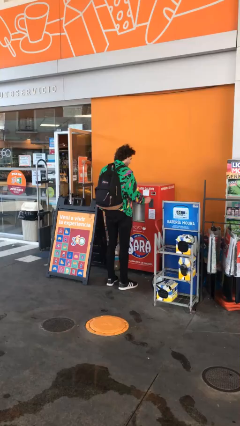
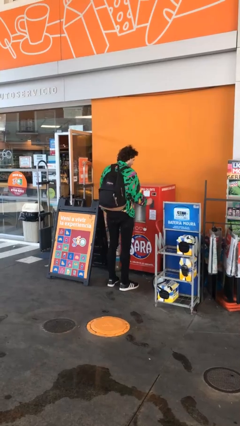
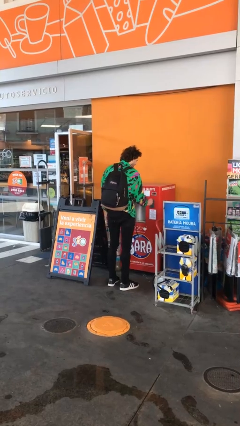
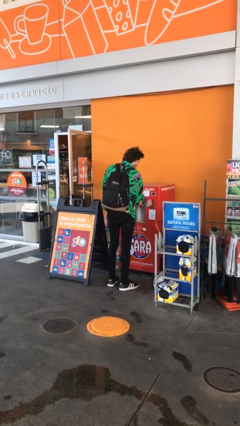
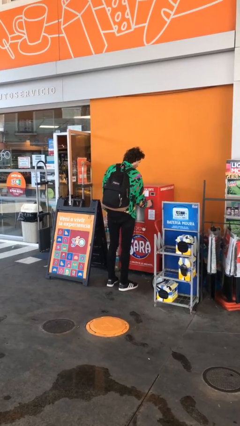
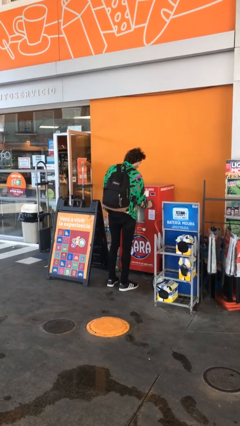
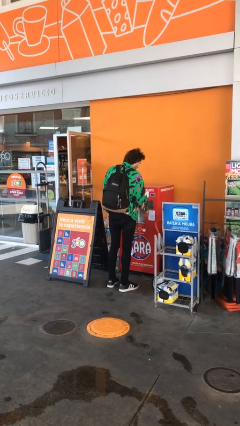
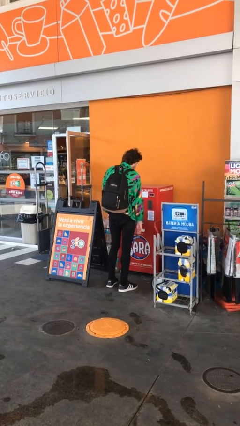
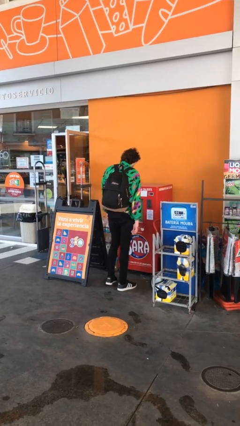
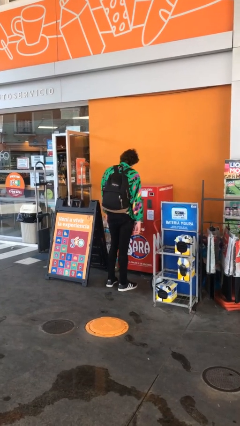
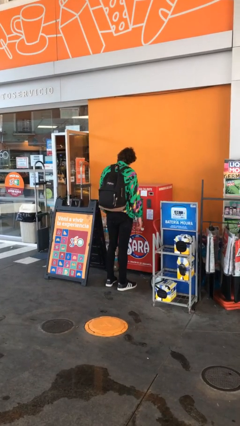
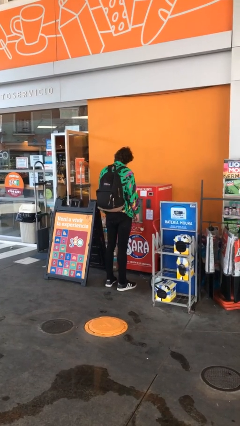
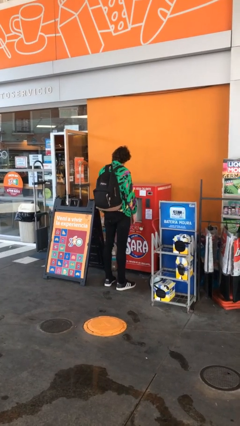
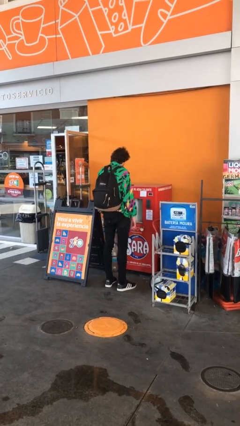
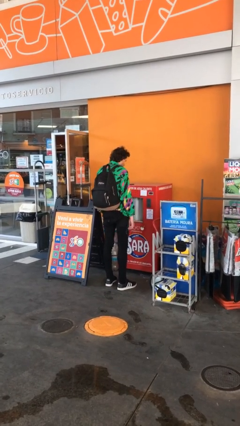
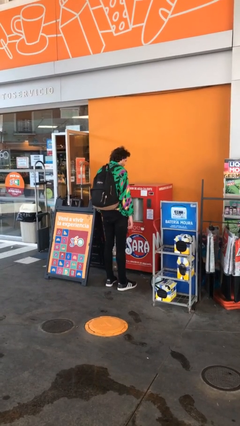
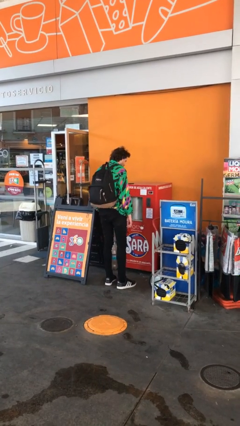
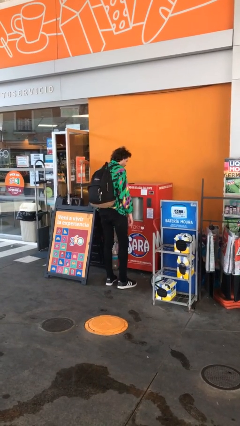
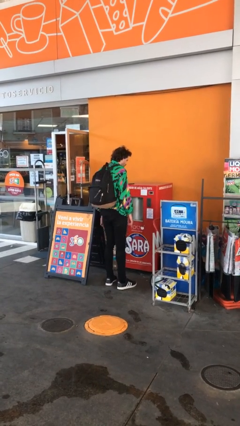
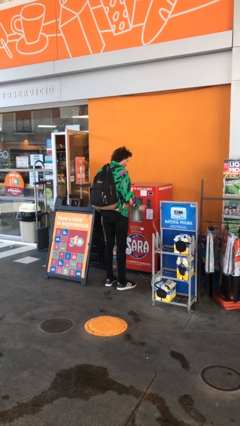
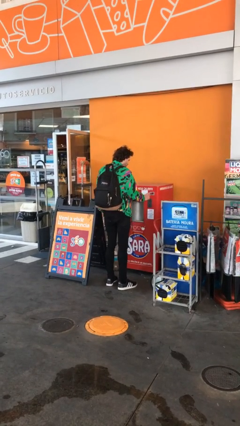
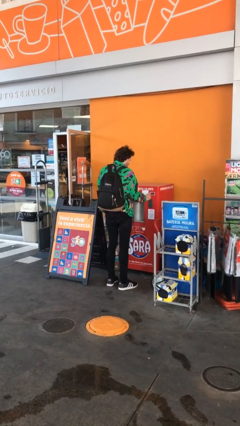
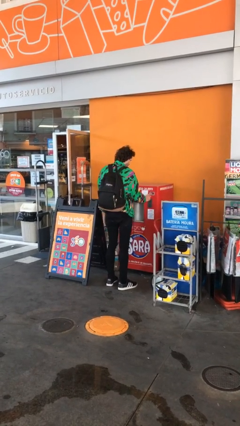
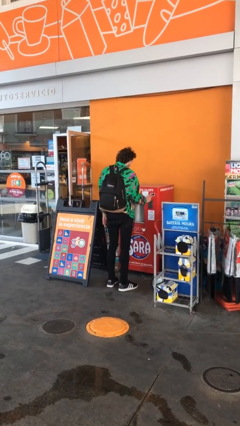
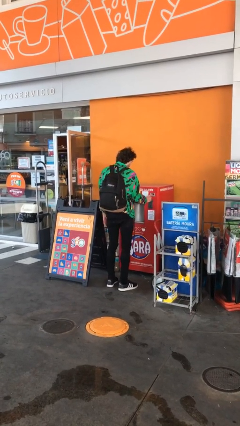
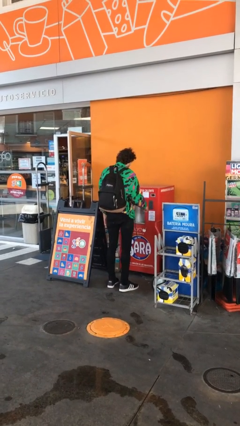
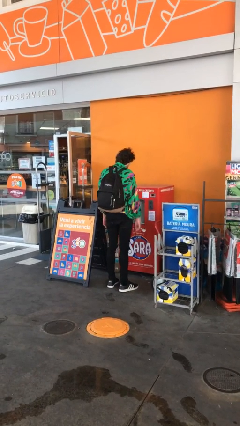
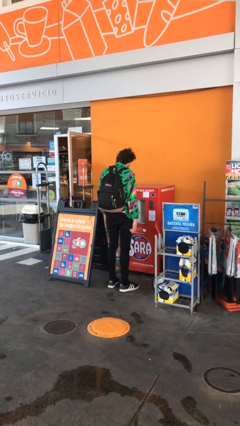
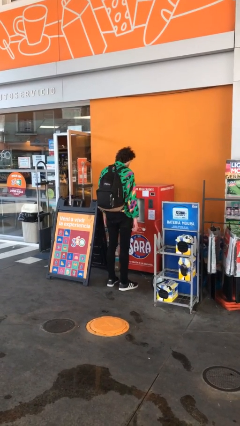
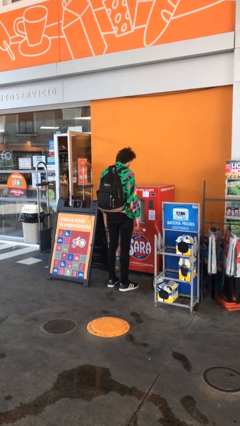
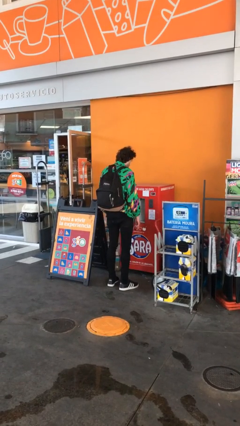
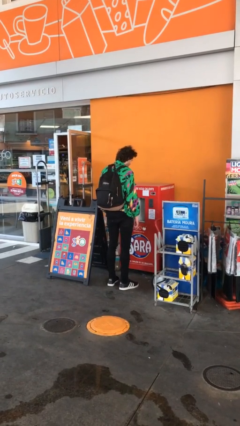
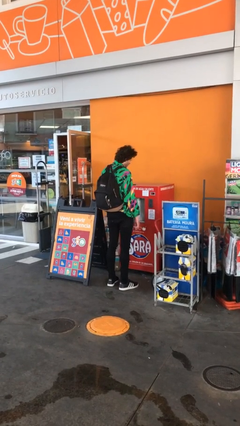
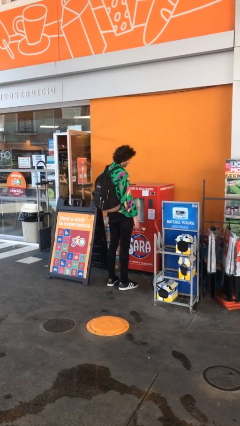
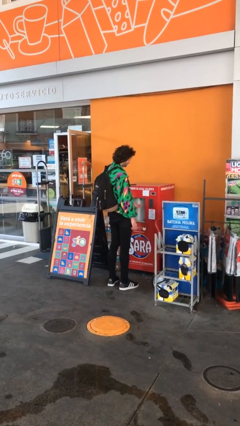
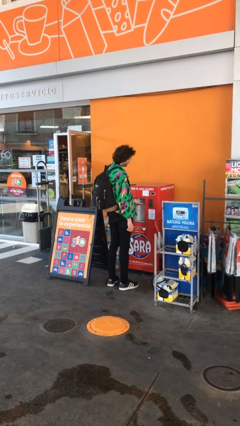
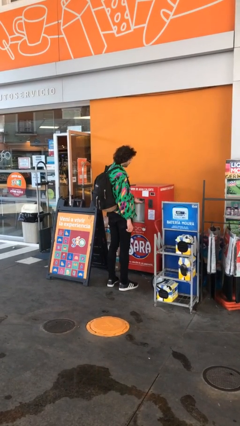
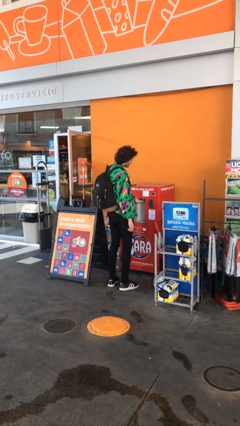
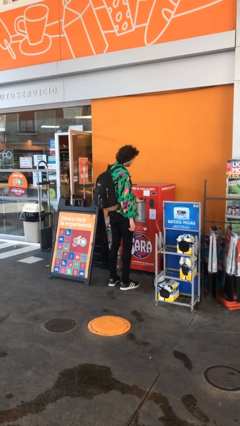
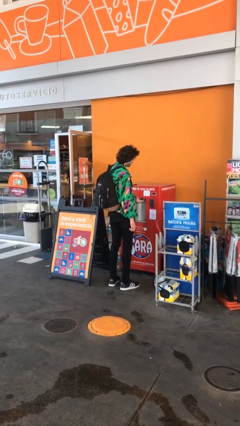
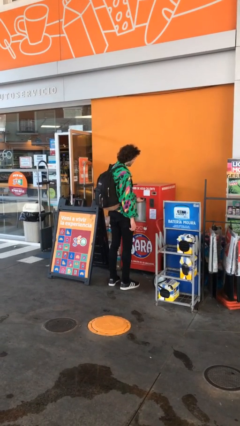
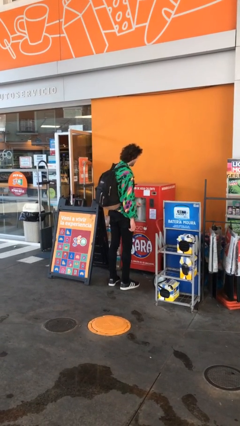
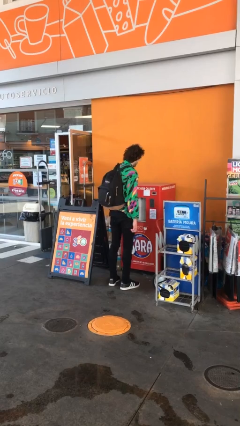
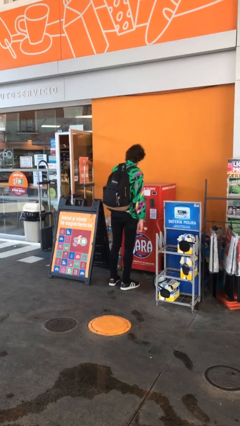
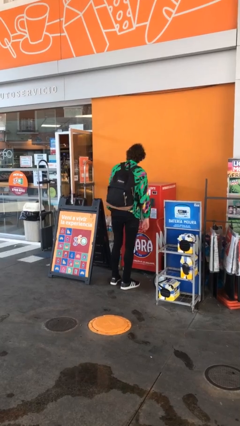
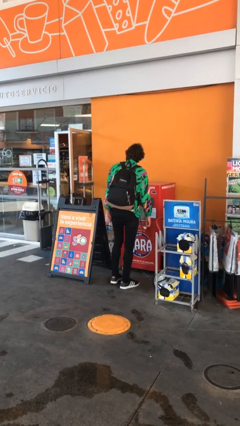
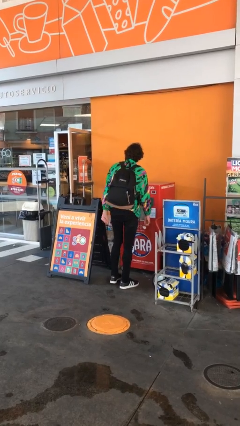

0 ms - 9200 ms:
person purchases from machine

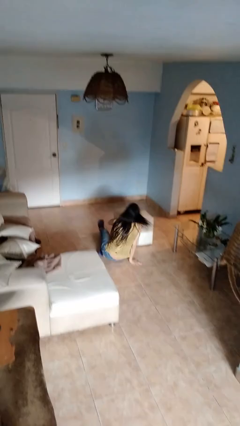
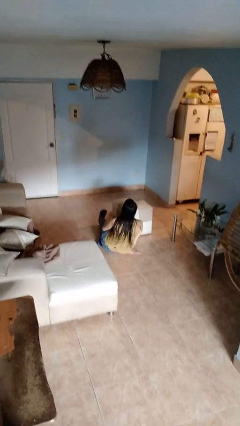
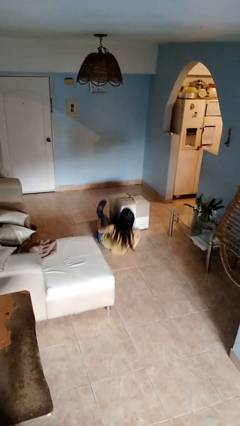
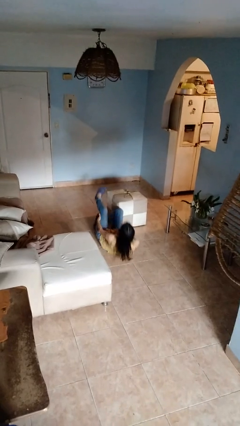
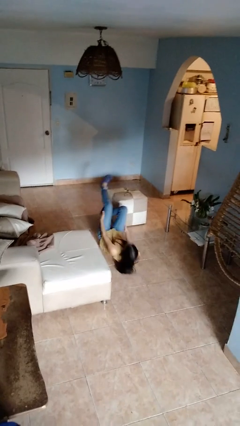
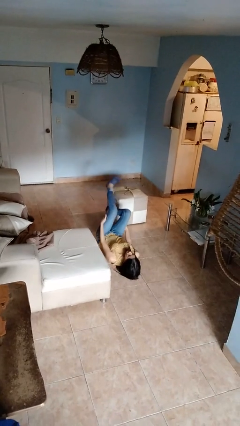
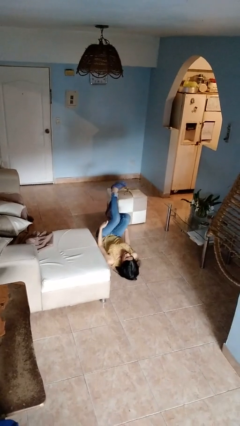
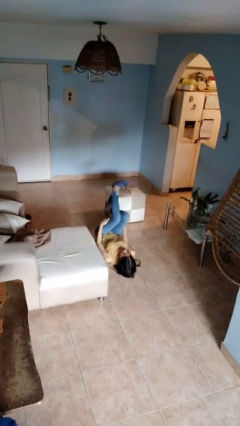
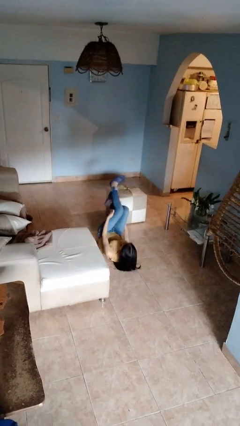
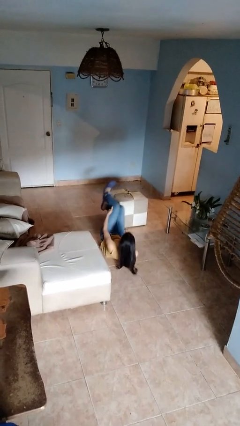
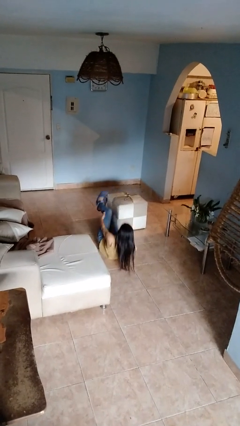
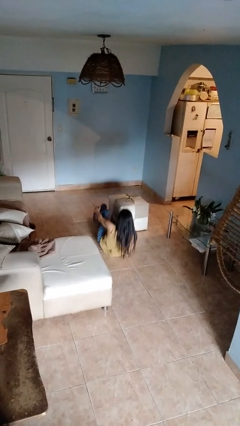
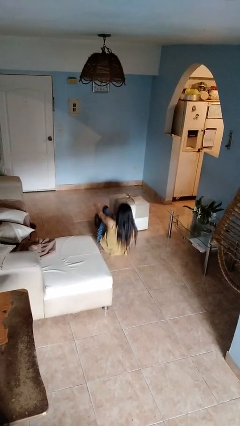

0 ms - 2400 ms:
person lies down on floor

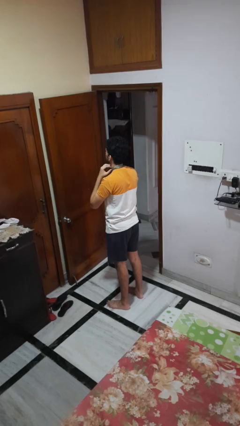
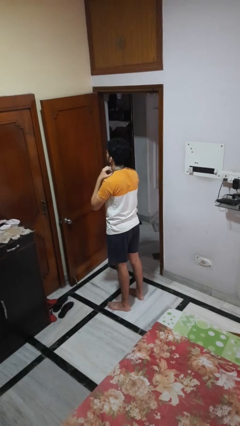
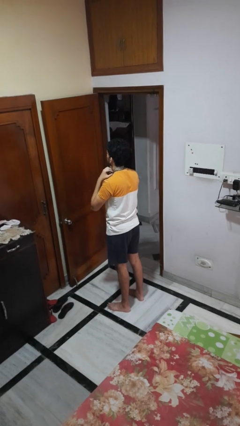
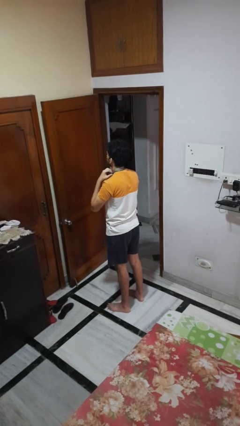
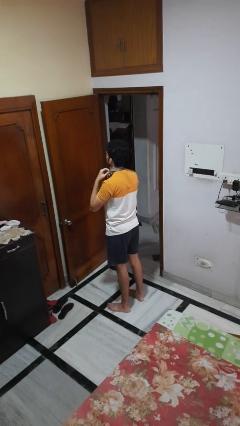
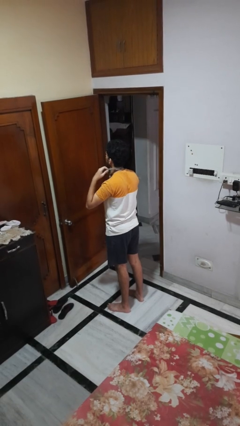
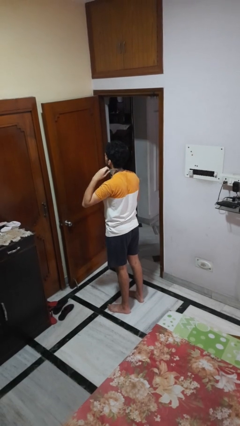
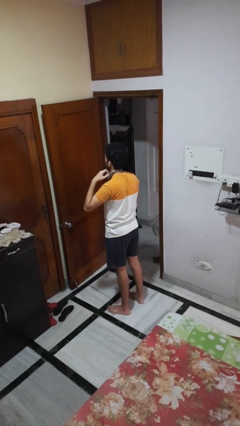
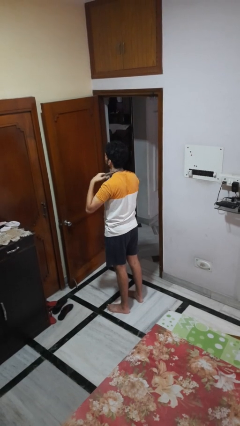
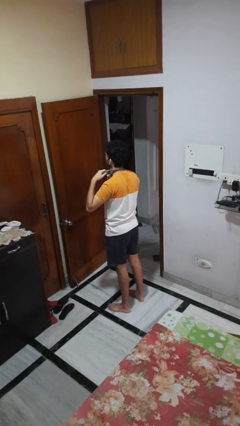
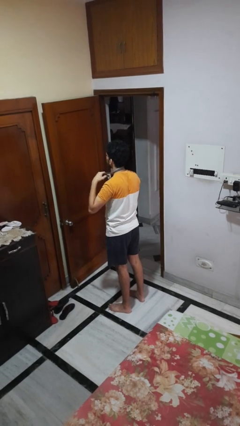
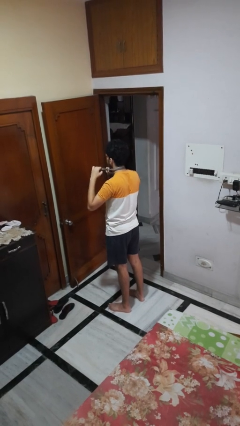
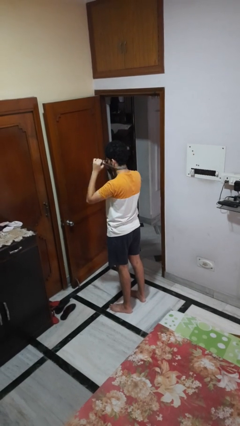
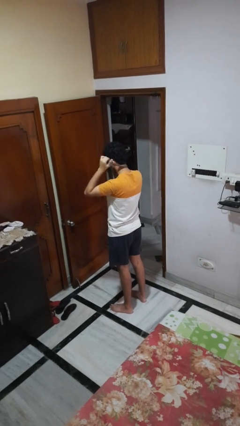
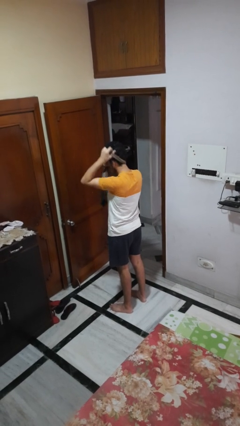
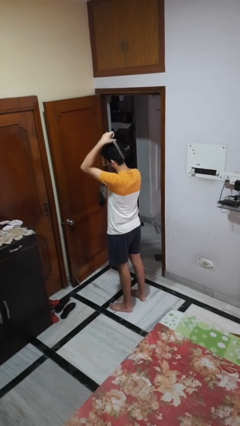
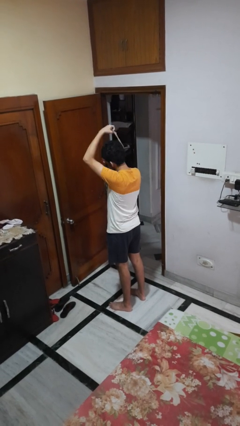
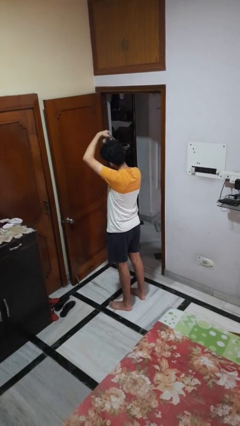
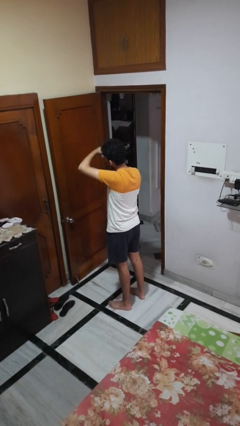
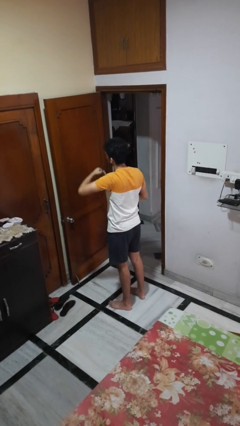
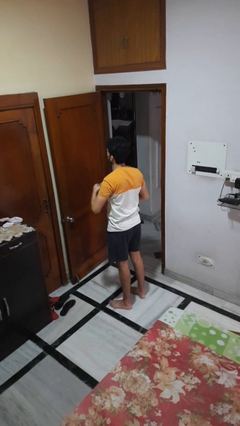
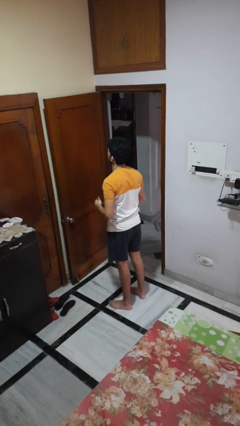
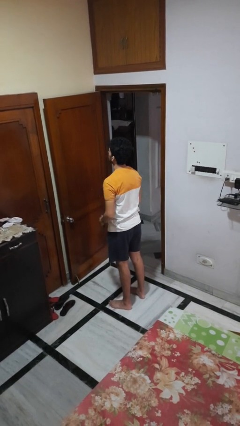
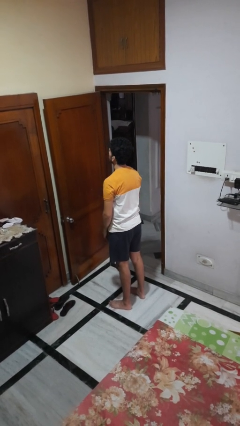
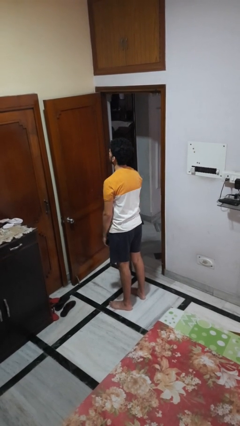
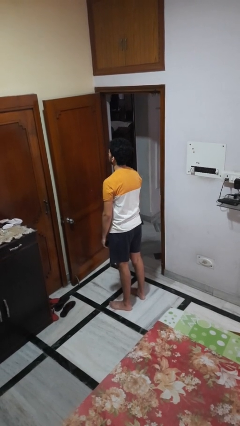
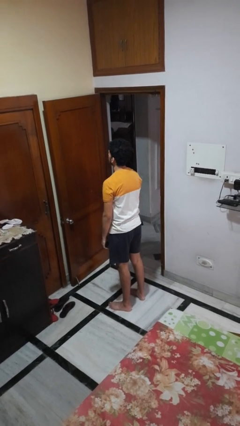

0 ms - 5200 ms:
person takes off necktie

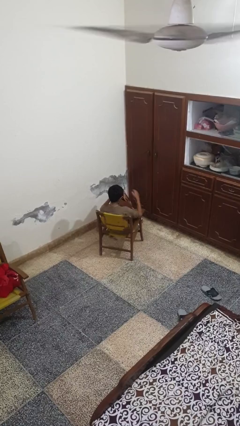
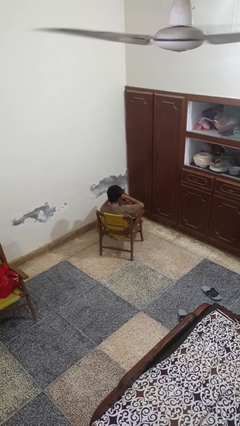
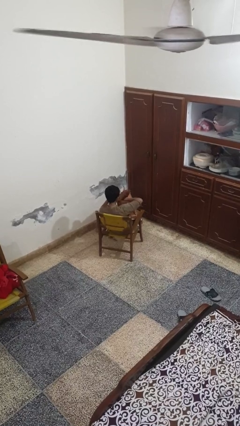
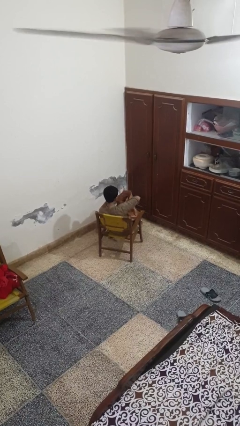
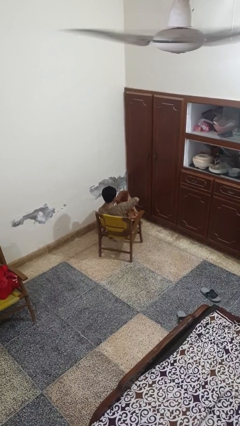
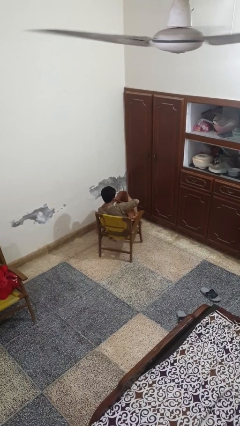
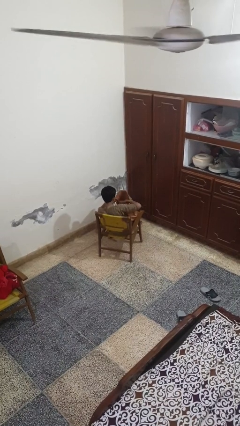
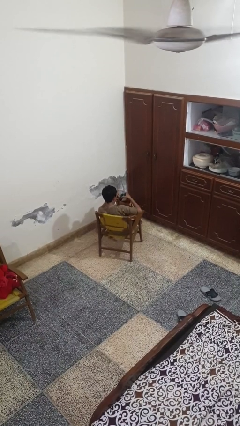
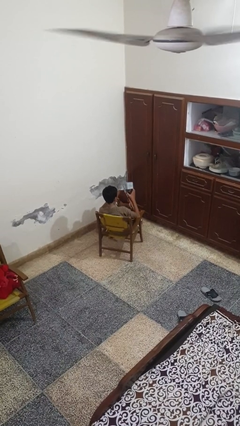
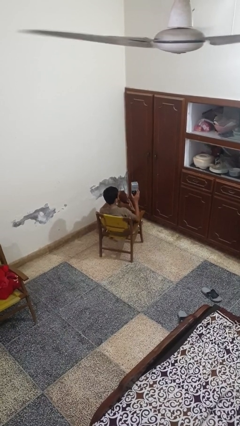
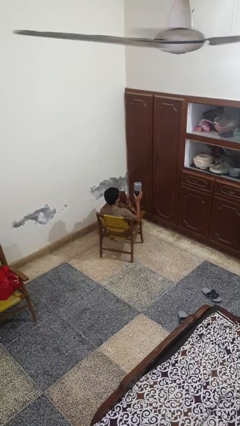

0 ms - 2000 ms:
person takes object from bag
